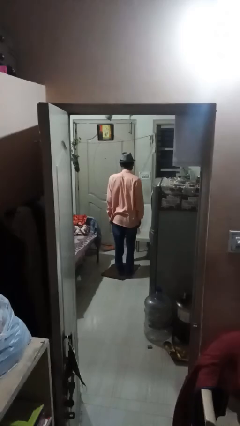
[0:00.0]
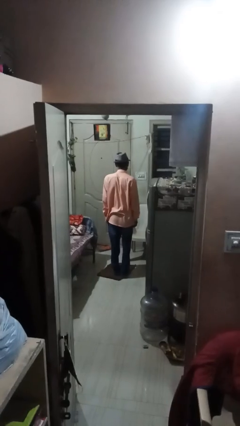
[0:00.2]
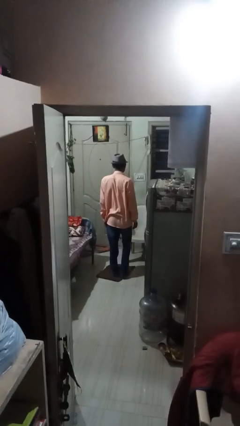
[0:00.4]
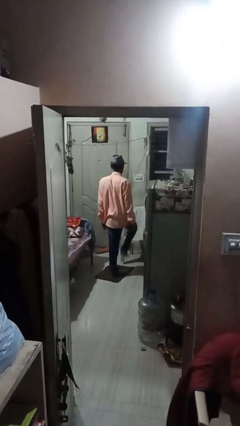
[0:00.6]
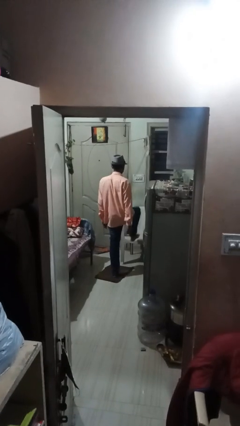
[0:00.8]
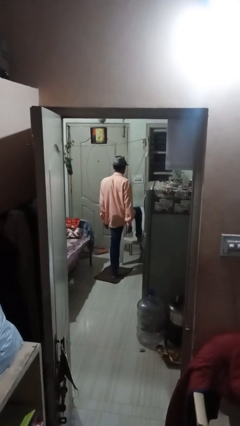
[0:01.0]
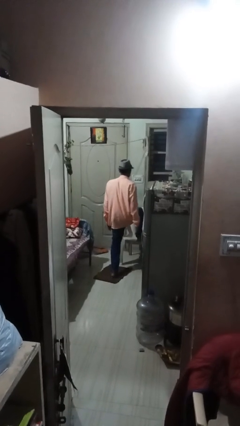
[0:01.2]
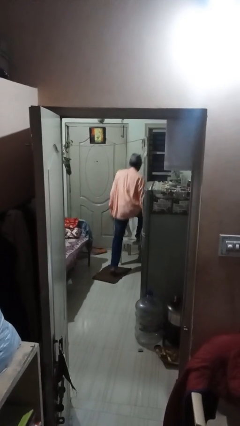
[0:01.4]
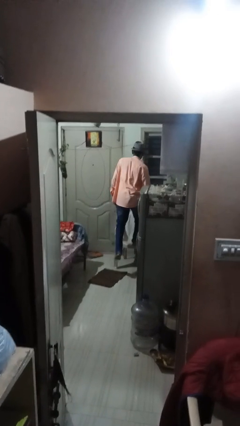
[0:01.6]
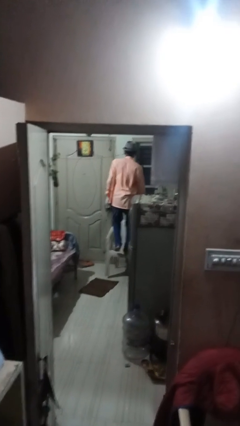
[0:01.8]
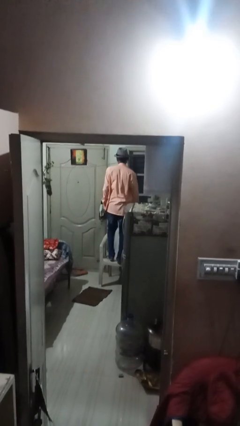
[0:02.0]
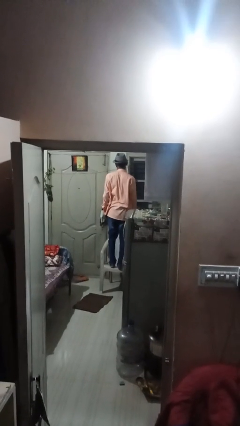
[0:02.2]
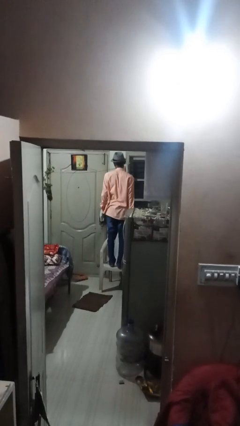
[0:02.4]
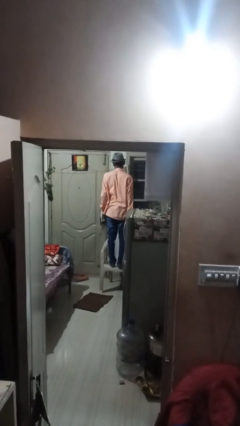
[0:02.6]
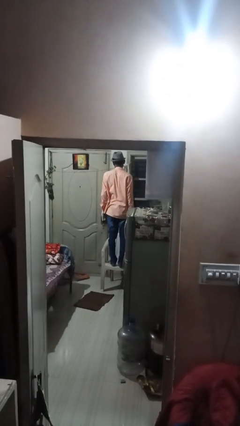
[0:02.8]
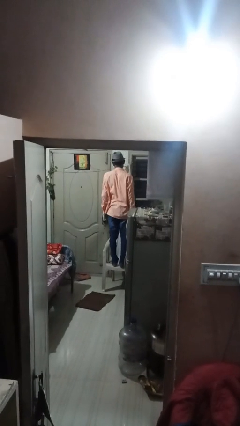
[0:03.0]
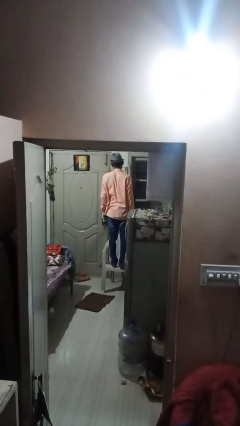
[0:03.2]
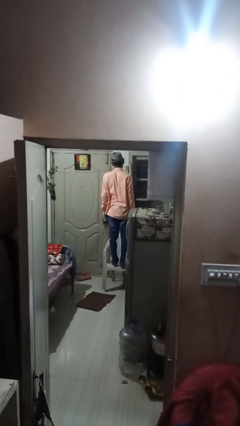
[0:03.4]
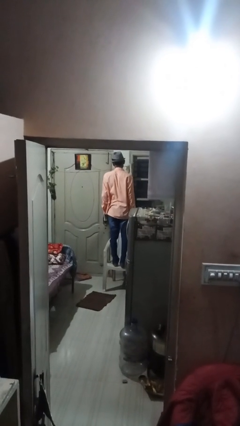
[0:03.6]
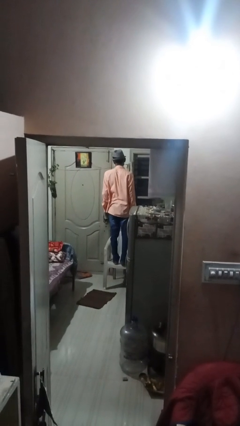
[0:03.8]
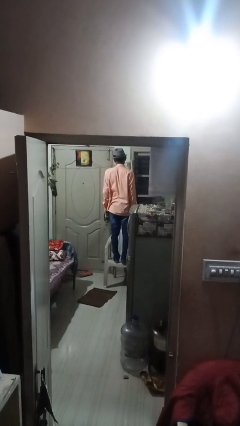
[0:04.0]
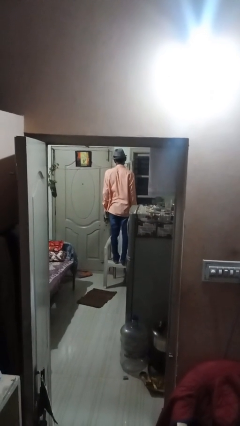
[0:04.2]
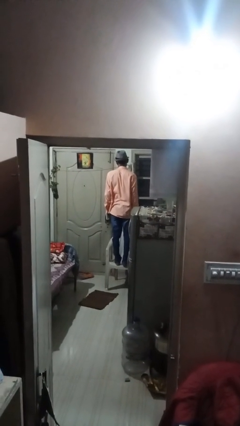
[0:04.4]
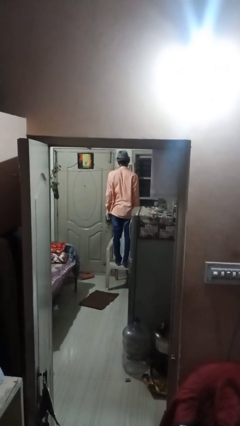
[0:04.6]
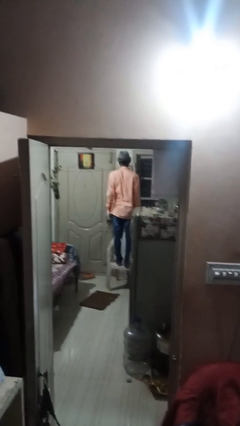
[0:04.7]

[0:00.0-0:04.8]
person climbs on chair

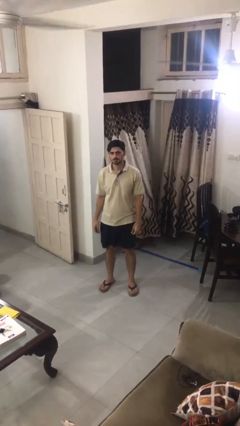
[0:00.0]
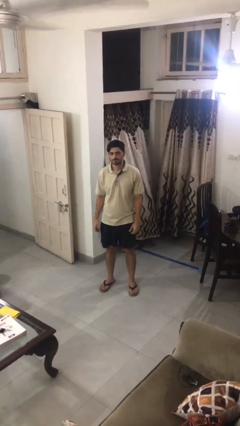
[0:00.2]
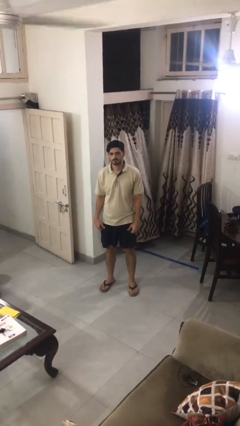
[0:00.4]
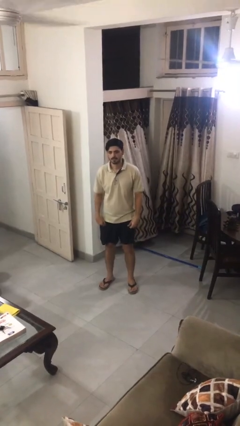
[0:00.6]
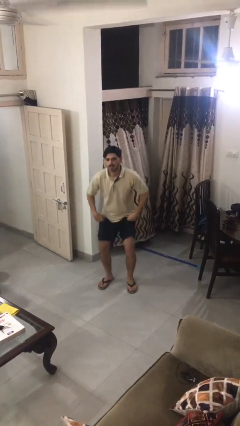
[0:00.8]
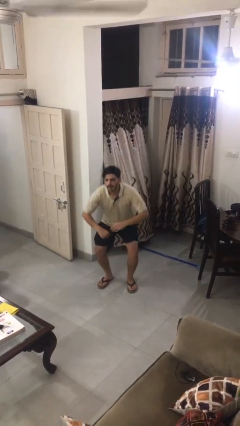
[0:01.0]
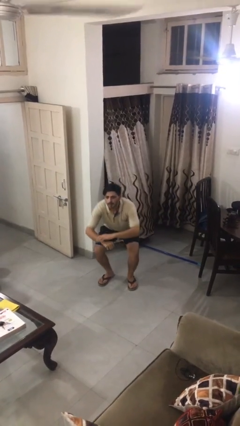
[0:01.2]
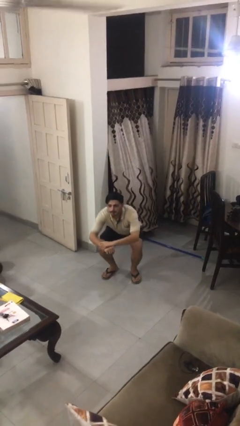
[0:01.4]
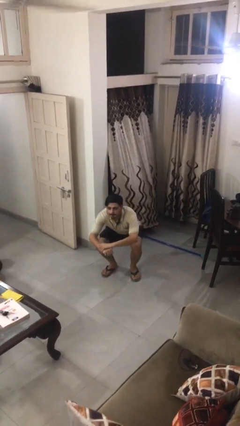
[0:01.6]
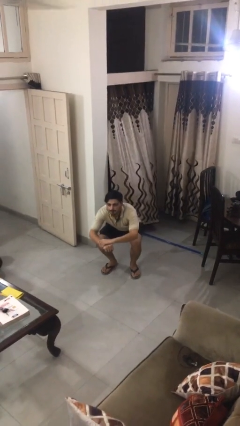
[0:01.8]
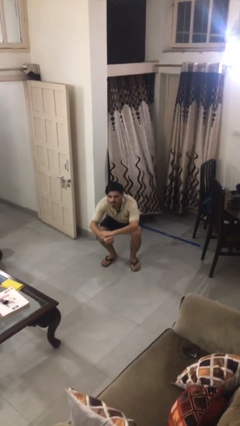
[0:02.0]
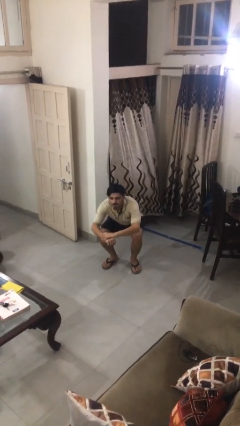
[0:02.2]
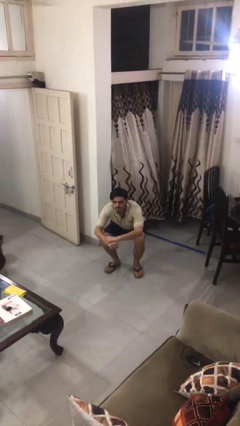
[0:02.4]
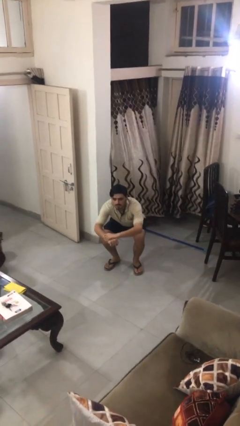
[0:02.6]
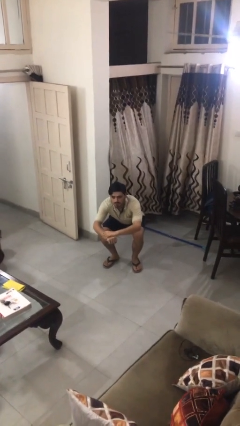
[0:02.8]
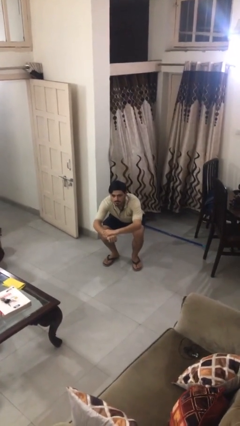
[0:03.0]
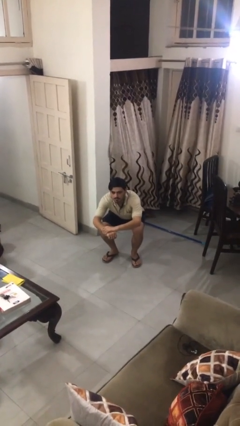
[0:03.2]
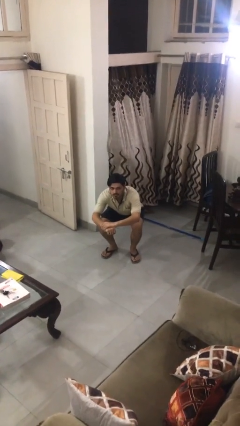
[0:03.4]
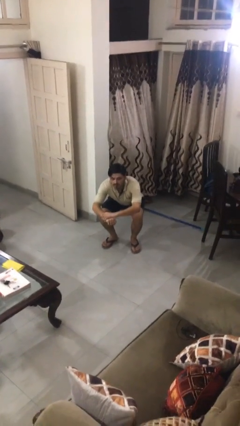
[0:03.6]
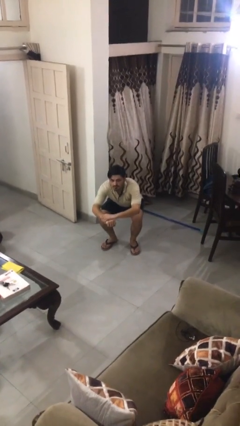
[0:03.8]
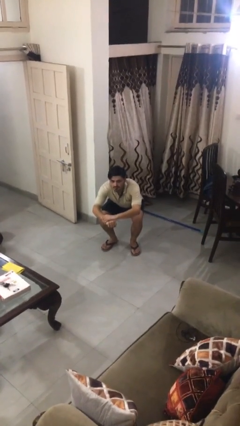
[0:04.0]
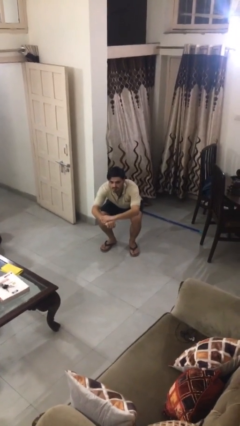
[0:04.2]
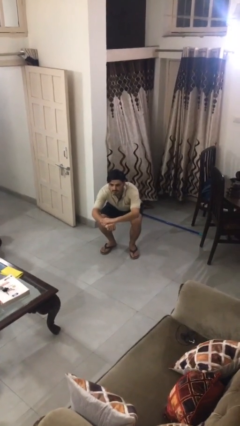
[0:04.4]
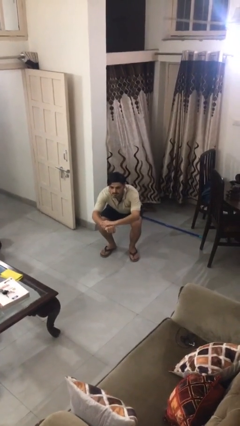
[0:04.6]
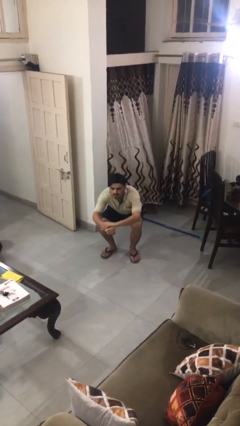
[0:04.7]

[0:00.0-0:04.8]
person squats

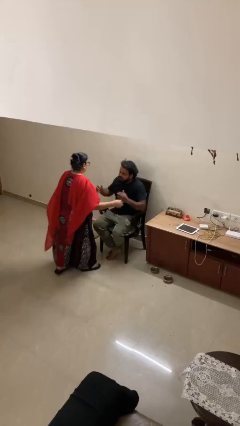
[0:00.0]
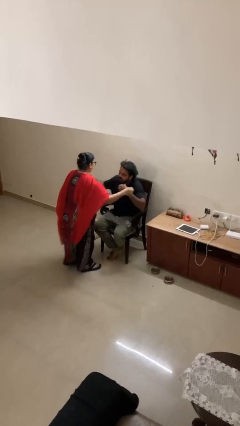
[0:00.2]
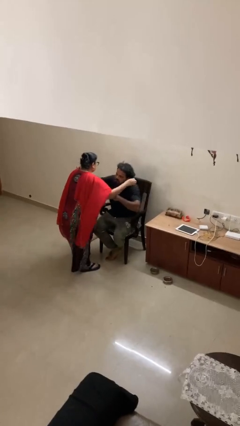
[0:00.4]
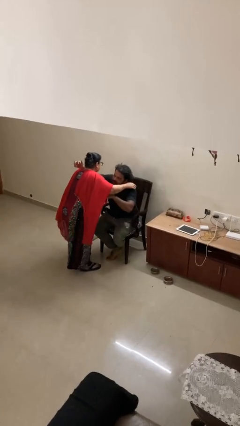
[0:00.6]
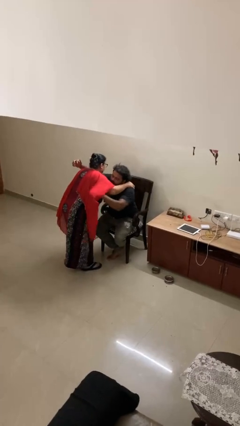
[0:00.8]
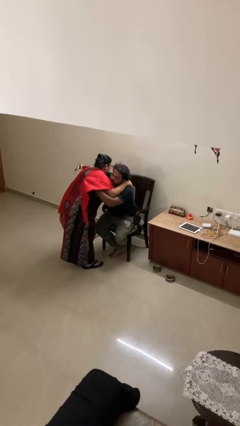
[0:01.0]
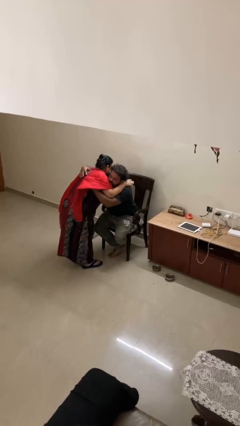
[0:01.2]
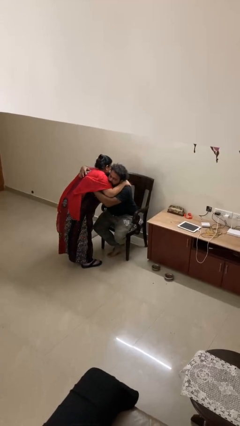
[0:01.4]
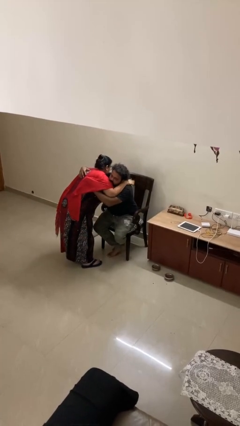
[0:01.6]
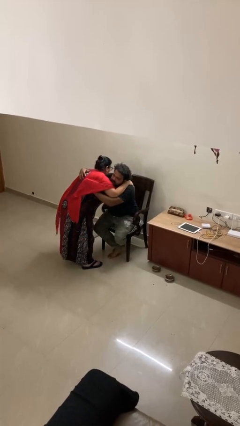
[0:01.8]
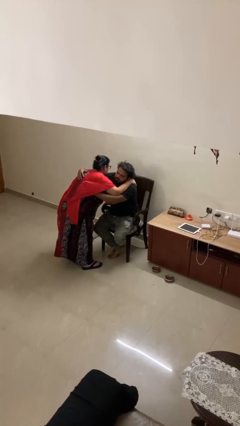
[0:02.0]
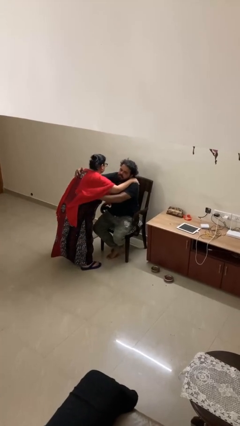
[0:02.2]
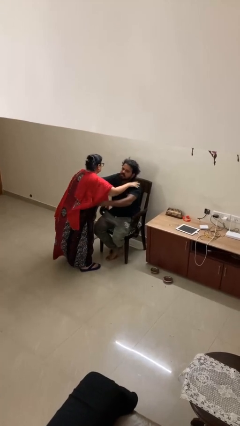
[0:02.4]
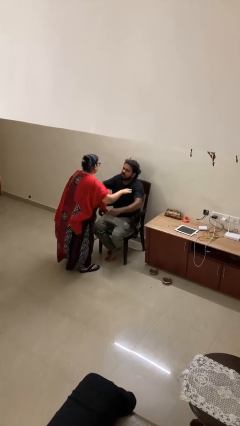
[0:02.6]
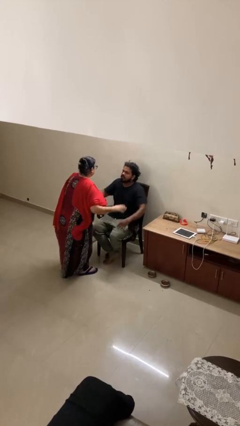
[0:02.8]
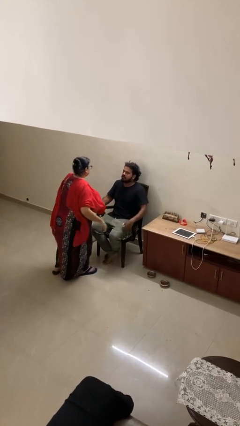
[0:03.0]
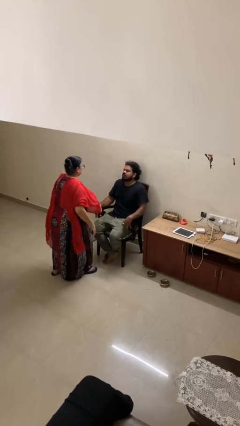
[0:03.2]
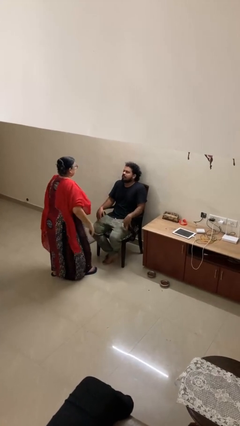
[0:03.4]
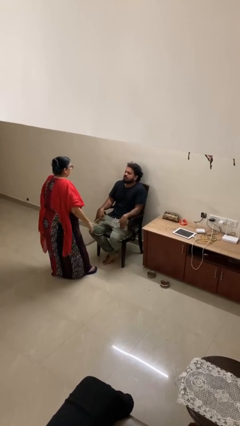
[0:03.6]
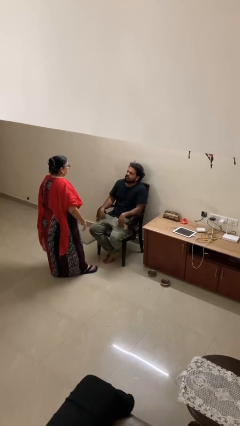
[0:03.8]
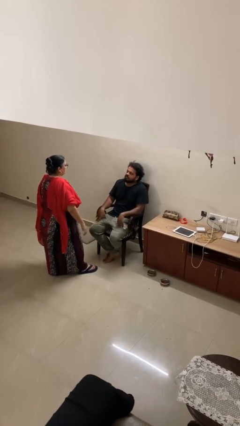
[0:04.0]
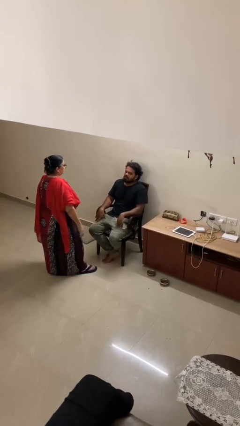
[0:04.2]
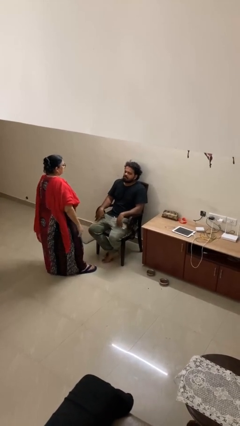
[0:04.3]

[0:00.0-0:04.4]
person embraces person

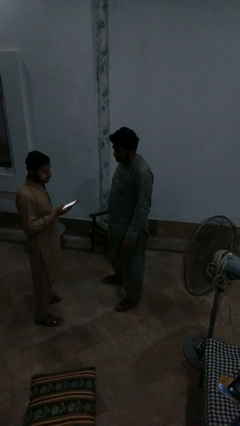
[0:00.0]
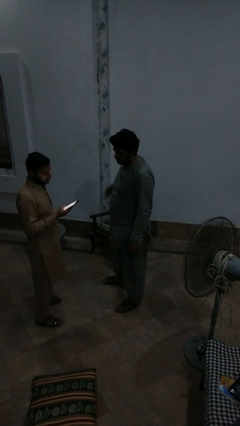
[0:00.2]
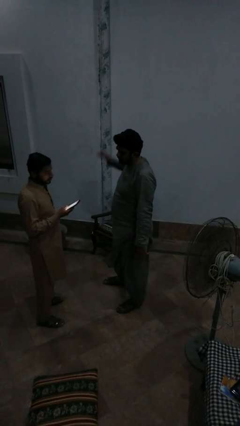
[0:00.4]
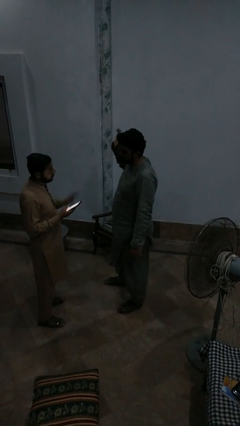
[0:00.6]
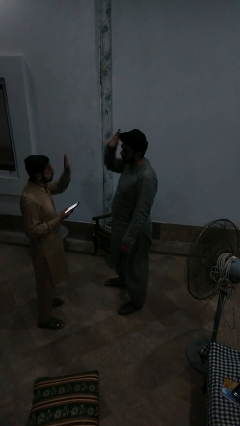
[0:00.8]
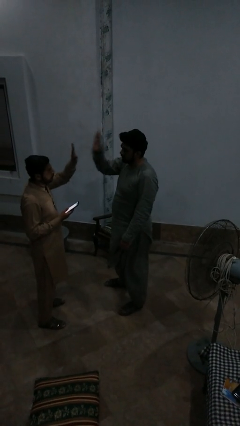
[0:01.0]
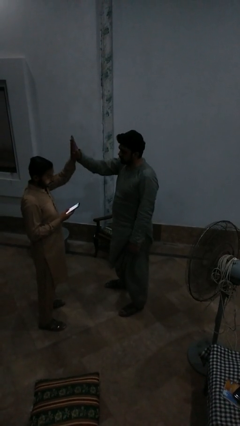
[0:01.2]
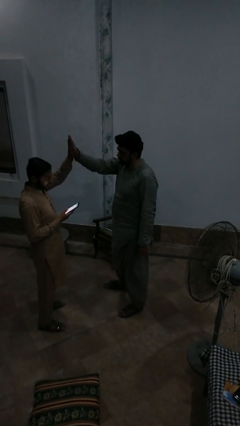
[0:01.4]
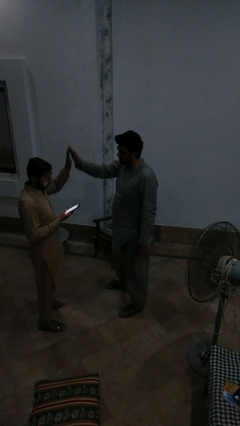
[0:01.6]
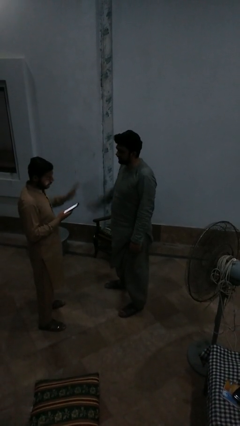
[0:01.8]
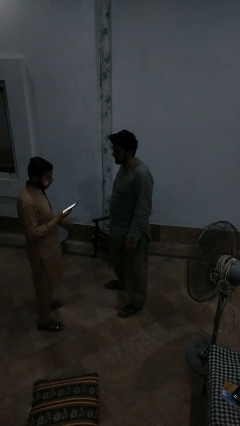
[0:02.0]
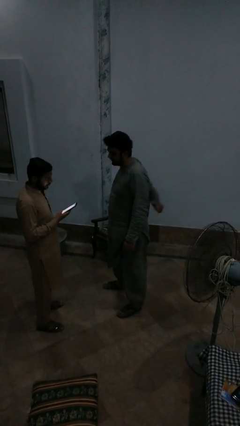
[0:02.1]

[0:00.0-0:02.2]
person highfives hand

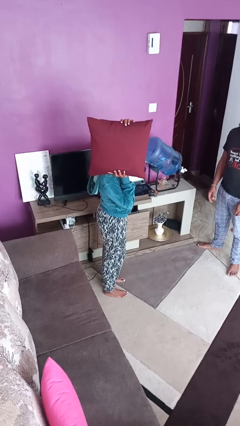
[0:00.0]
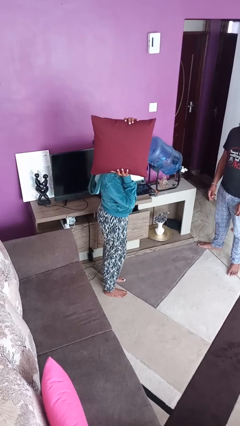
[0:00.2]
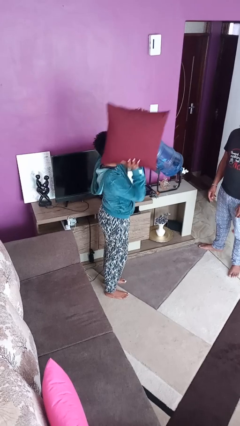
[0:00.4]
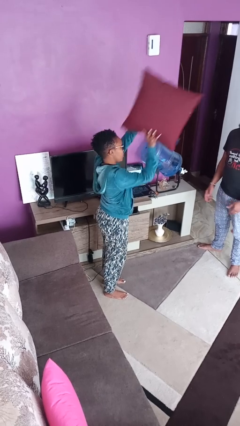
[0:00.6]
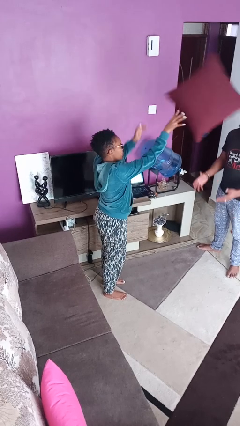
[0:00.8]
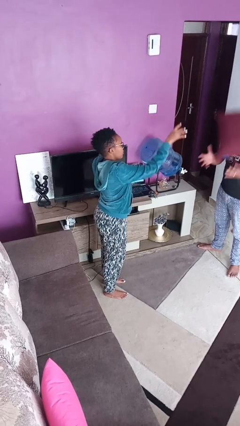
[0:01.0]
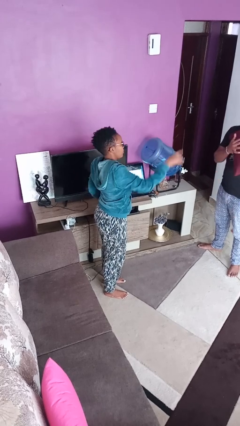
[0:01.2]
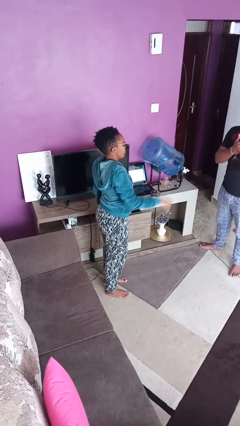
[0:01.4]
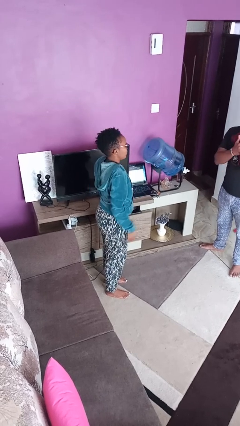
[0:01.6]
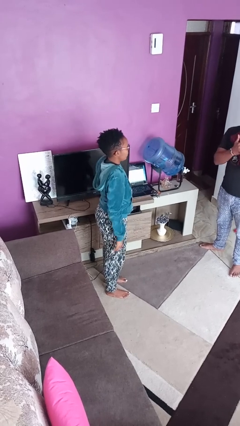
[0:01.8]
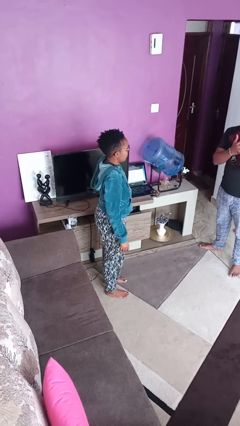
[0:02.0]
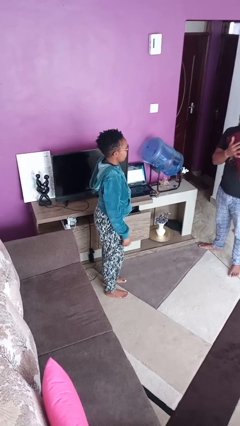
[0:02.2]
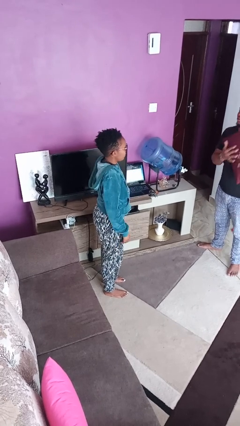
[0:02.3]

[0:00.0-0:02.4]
person throws object to person
